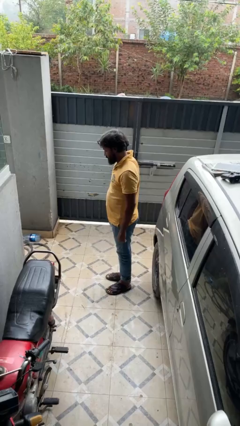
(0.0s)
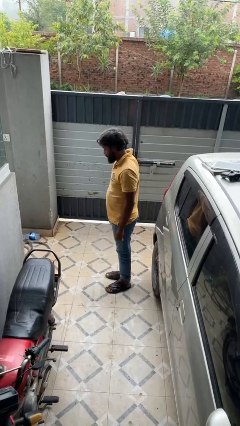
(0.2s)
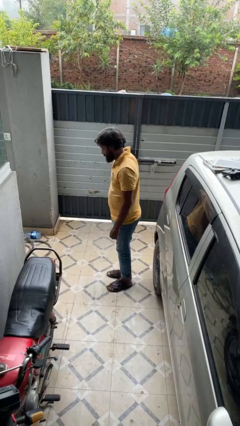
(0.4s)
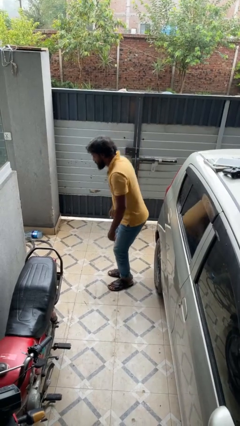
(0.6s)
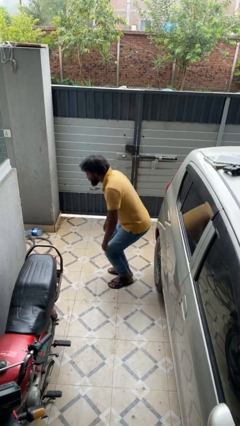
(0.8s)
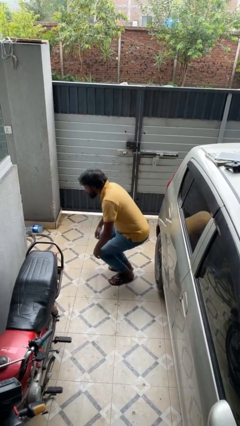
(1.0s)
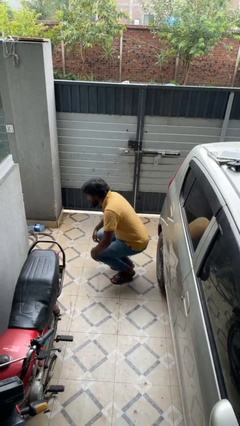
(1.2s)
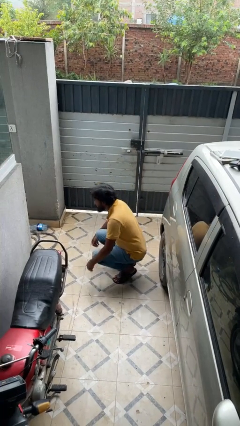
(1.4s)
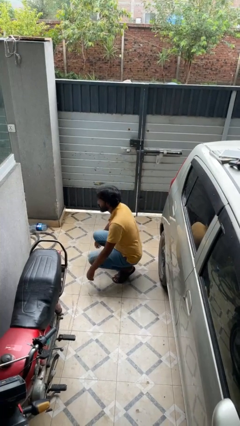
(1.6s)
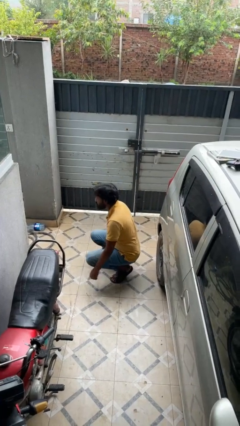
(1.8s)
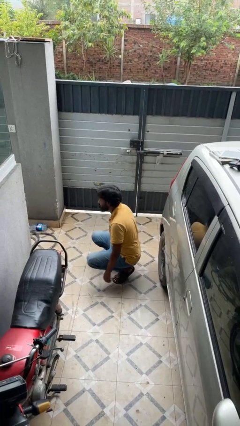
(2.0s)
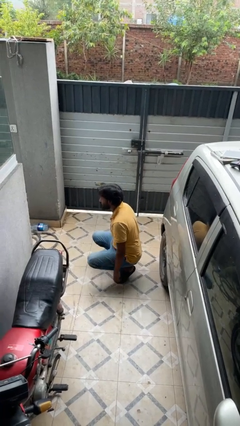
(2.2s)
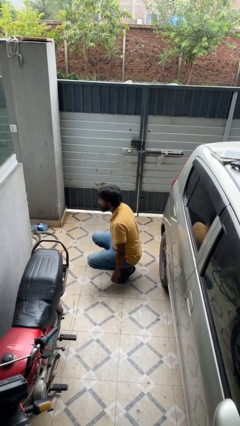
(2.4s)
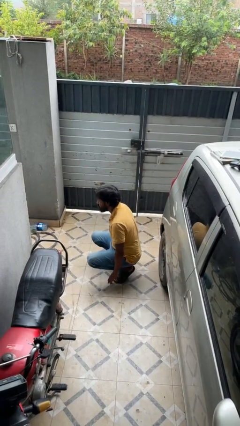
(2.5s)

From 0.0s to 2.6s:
person squats

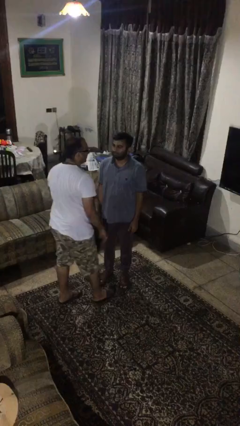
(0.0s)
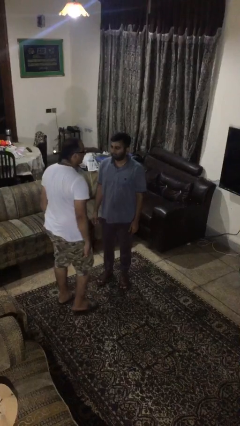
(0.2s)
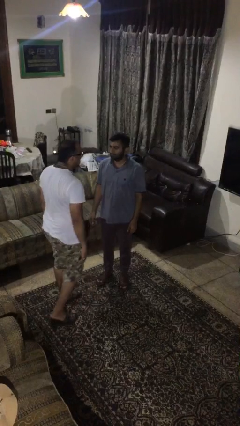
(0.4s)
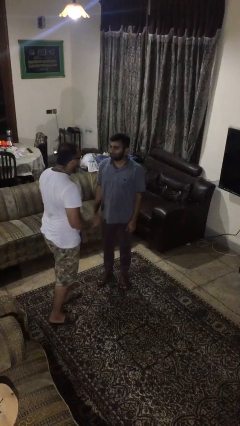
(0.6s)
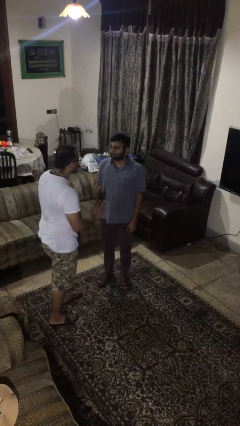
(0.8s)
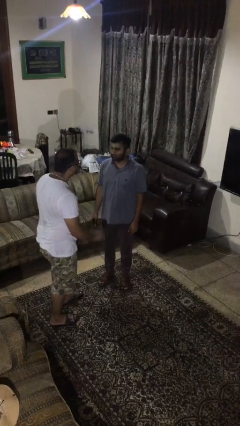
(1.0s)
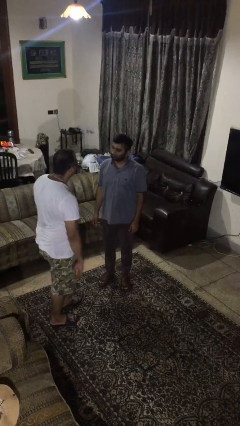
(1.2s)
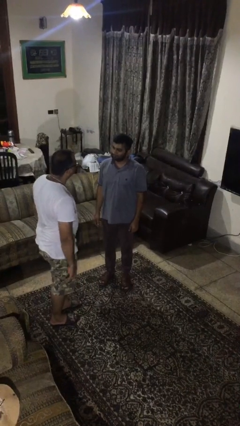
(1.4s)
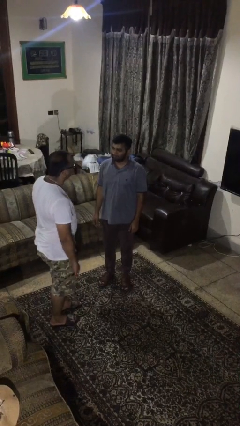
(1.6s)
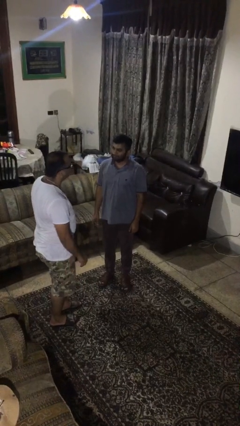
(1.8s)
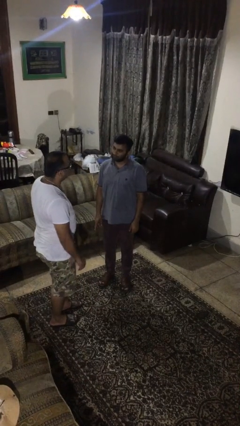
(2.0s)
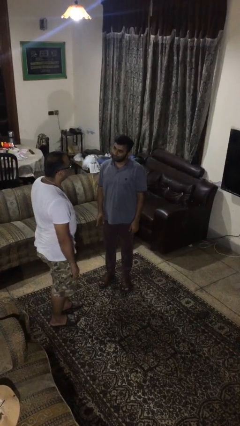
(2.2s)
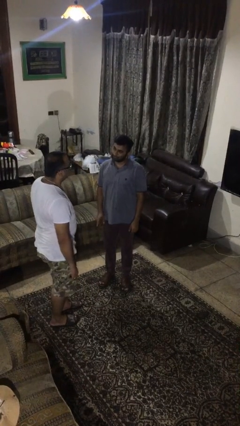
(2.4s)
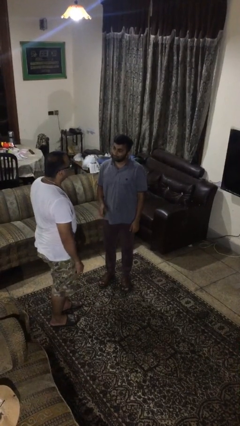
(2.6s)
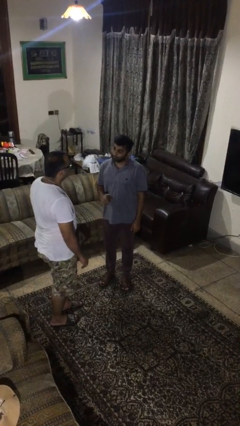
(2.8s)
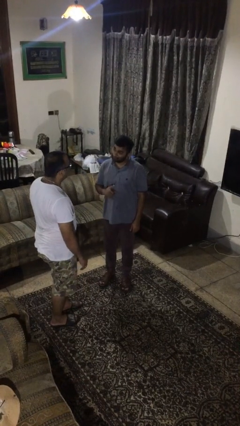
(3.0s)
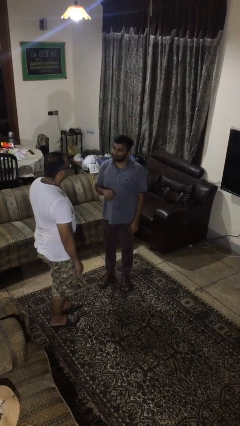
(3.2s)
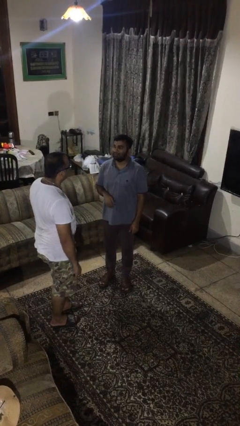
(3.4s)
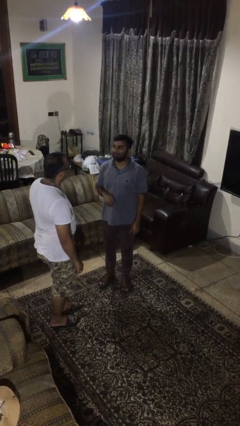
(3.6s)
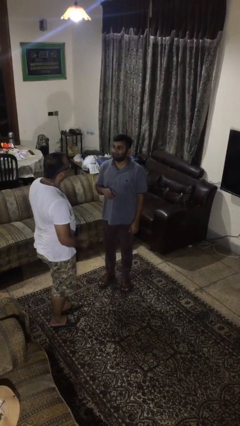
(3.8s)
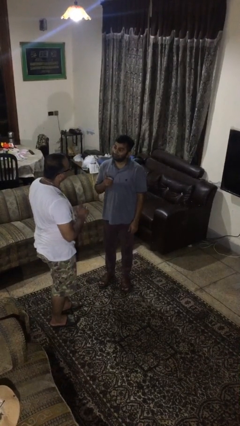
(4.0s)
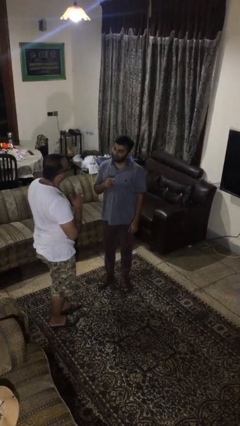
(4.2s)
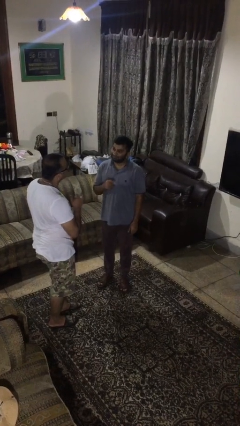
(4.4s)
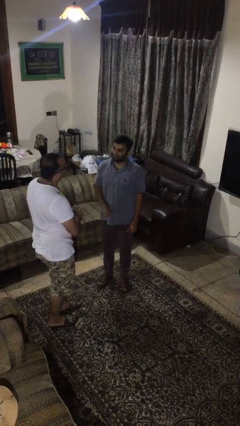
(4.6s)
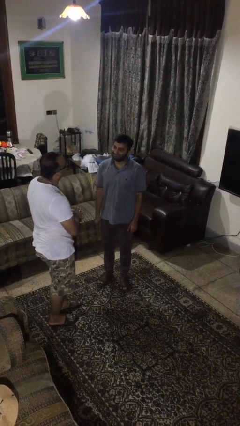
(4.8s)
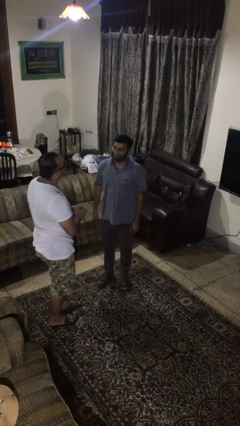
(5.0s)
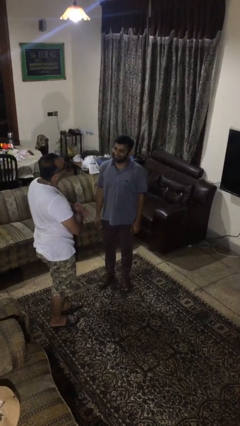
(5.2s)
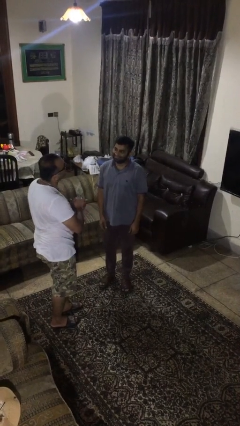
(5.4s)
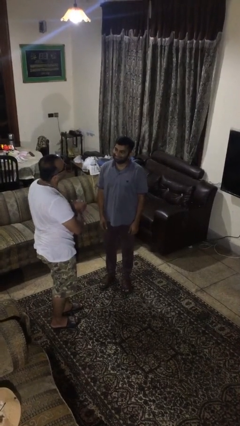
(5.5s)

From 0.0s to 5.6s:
person talks to person

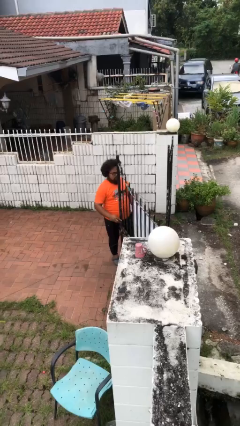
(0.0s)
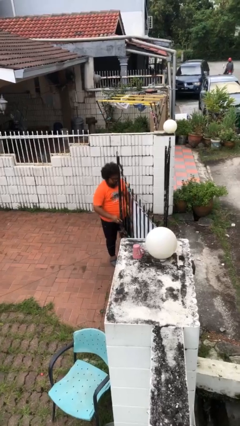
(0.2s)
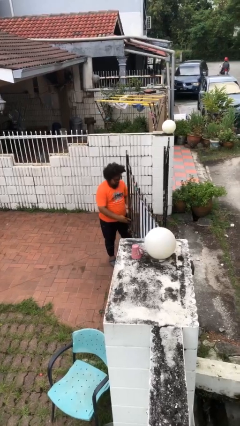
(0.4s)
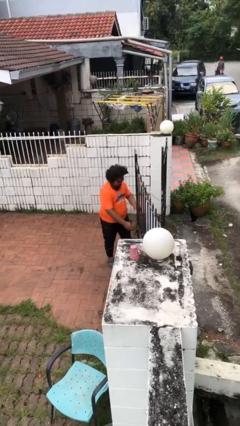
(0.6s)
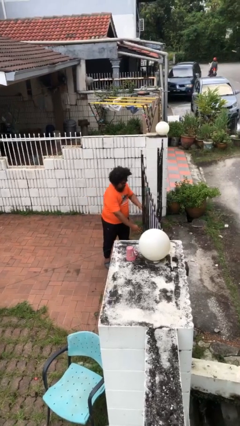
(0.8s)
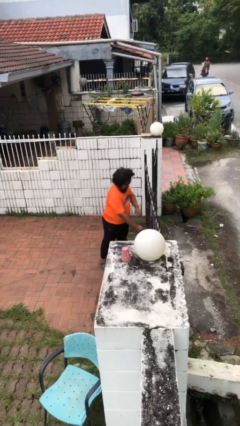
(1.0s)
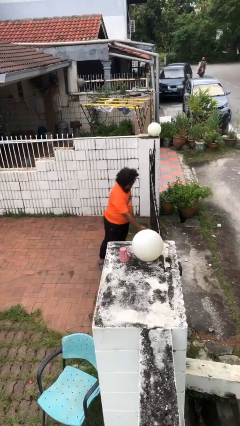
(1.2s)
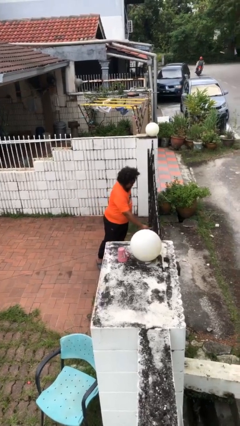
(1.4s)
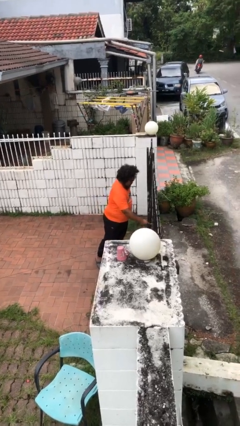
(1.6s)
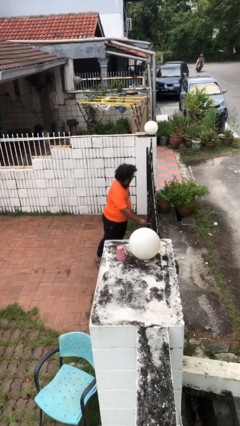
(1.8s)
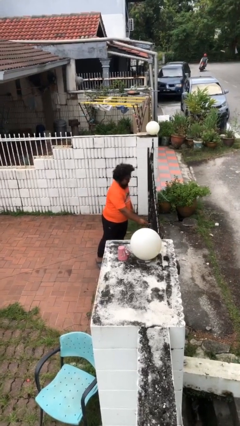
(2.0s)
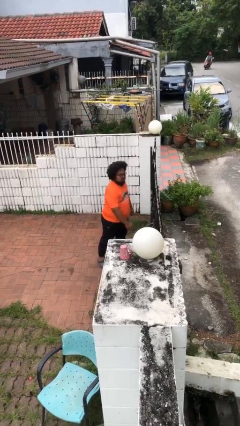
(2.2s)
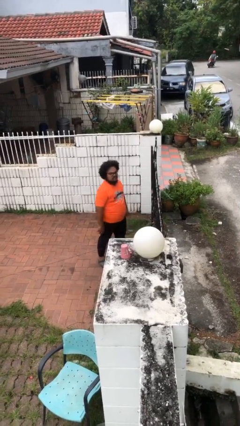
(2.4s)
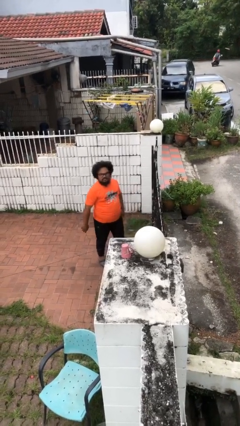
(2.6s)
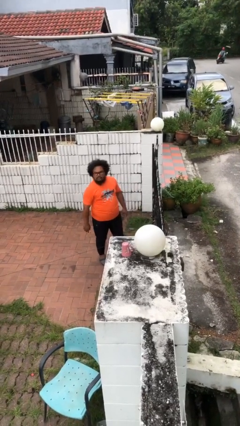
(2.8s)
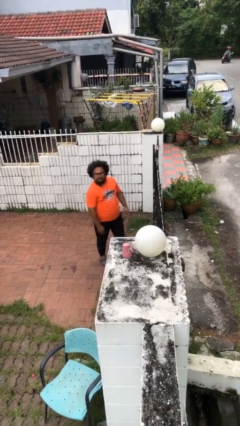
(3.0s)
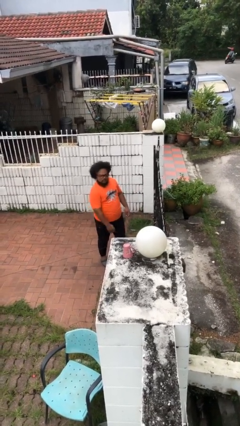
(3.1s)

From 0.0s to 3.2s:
person closes facility door

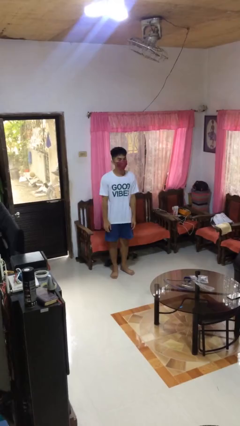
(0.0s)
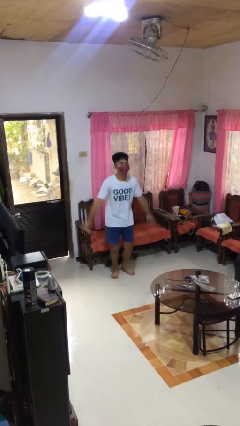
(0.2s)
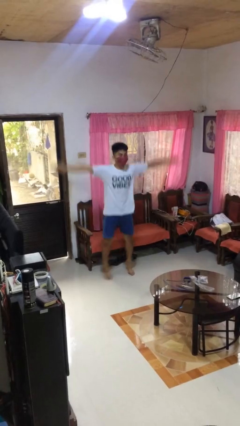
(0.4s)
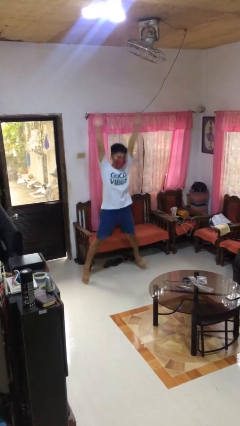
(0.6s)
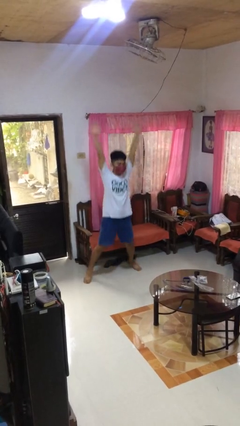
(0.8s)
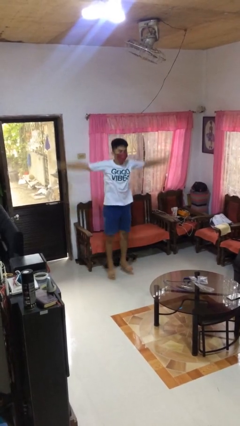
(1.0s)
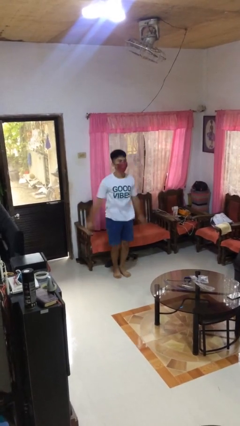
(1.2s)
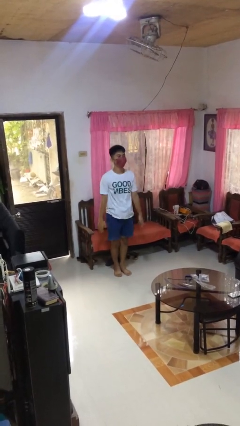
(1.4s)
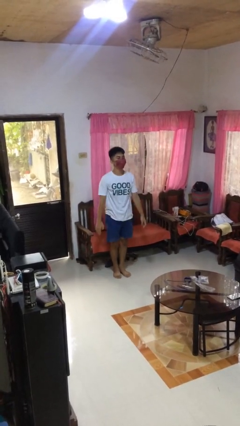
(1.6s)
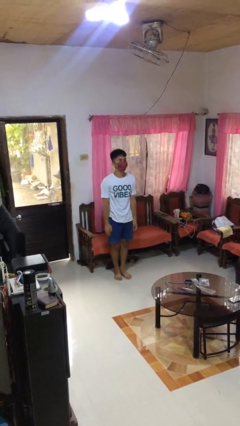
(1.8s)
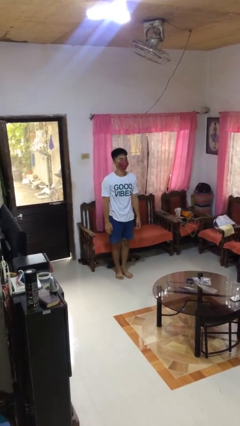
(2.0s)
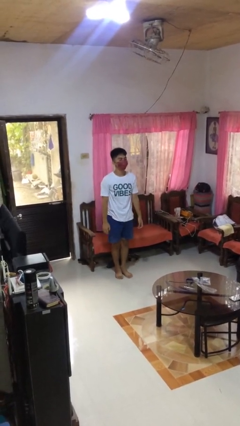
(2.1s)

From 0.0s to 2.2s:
person exercises with jumping jacks

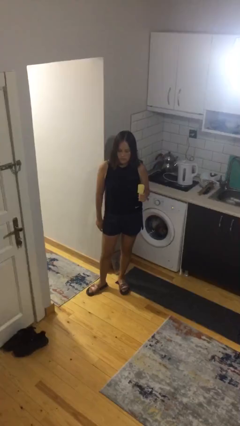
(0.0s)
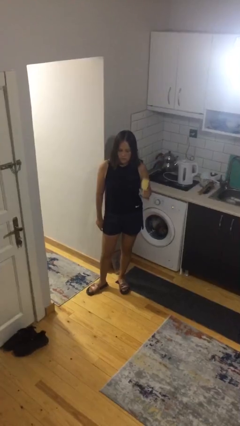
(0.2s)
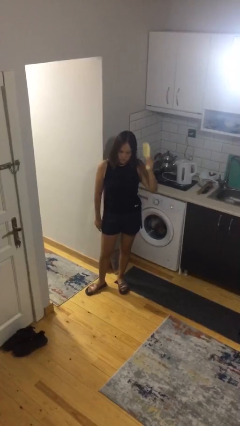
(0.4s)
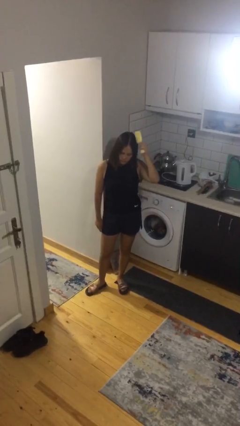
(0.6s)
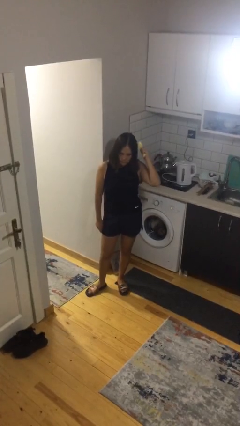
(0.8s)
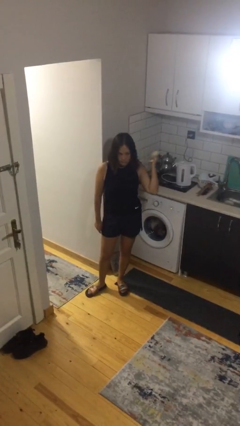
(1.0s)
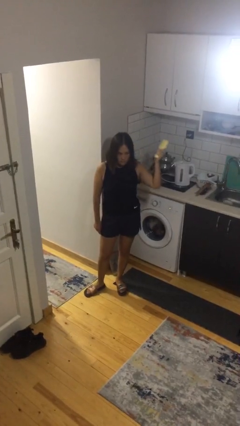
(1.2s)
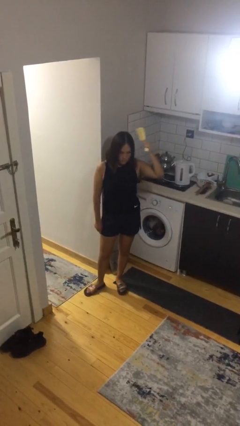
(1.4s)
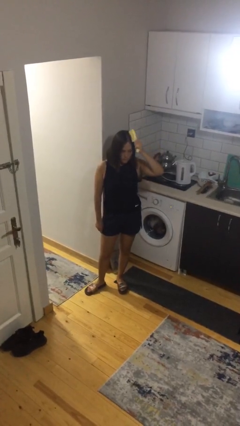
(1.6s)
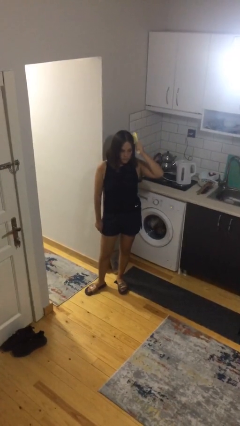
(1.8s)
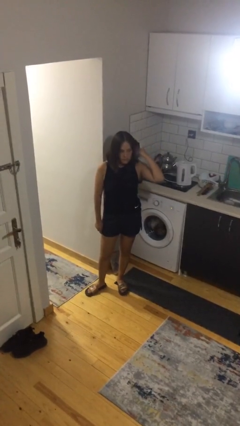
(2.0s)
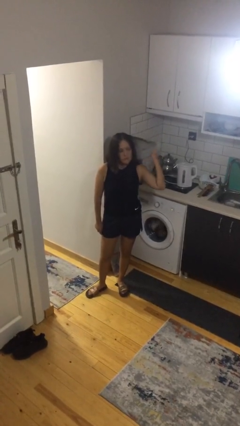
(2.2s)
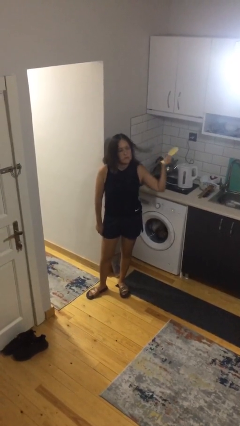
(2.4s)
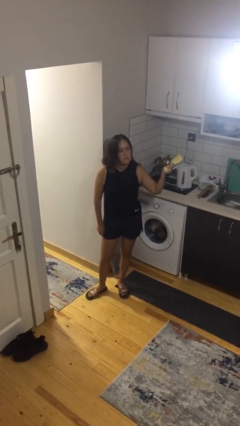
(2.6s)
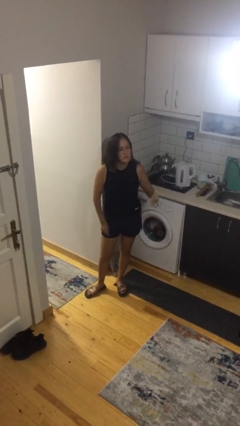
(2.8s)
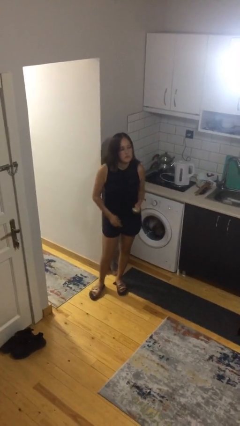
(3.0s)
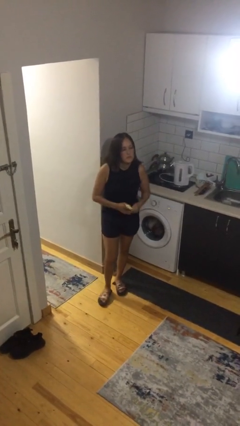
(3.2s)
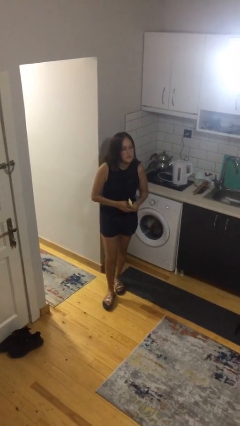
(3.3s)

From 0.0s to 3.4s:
person brushes hair

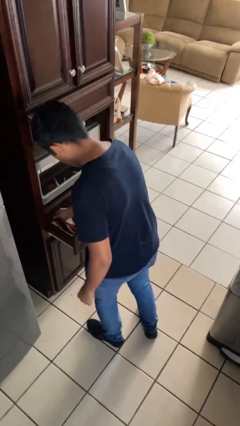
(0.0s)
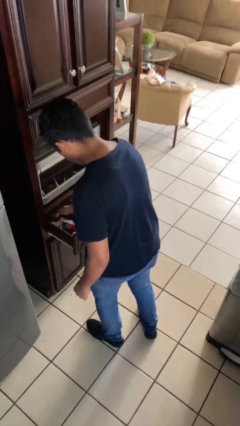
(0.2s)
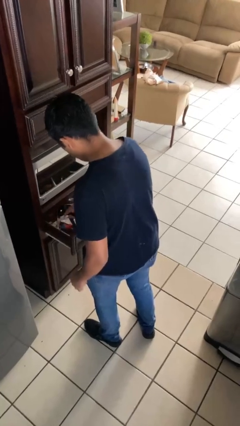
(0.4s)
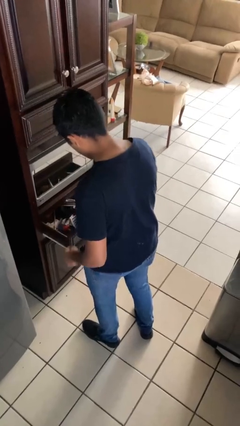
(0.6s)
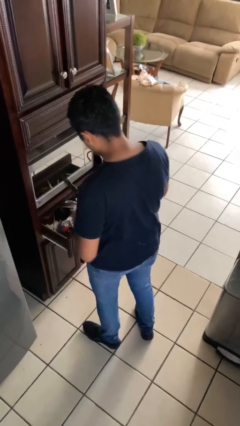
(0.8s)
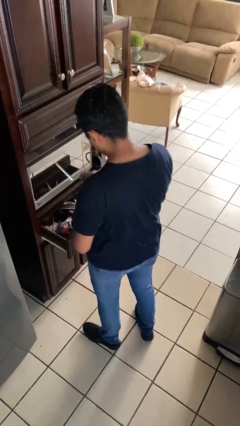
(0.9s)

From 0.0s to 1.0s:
person takes object from kitchen drawer
